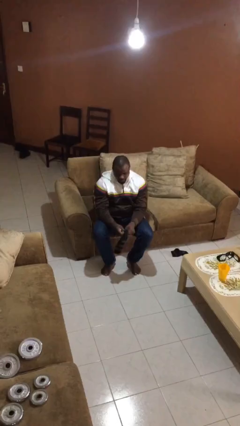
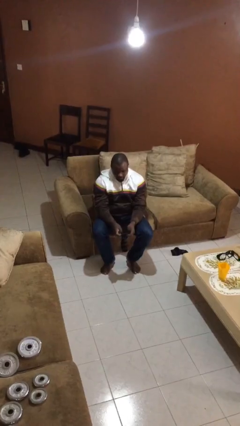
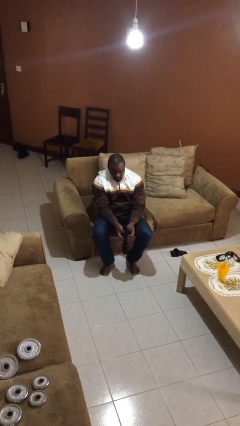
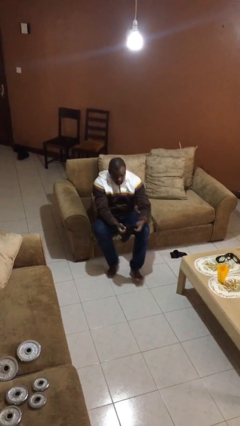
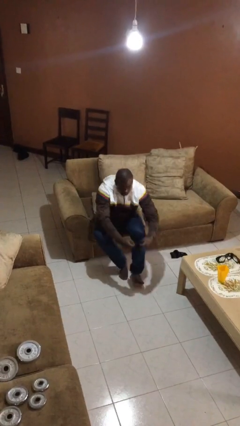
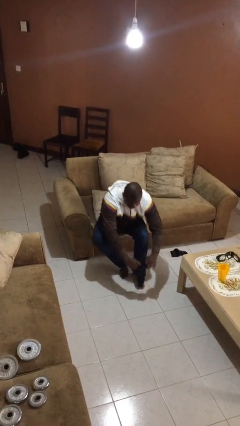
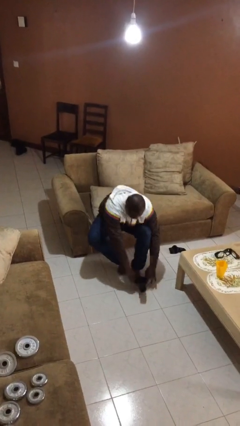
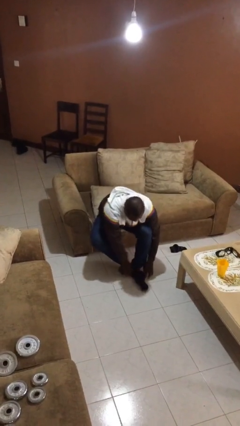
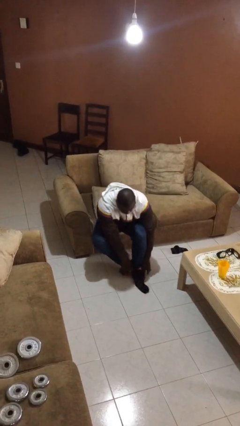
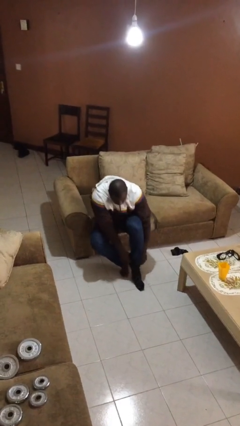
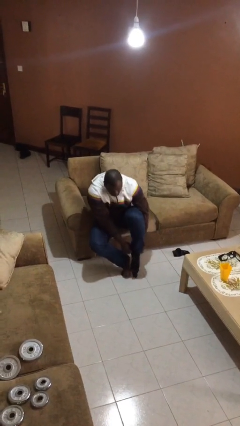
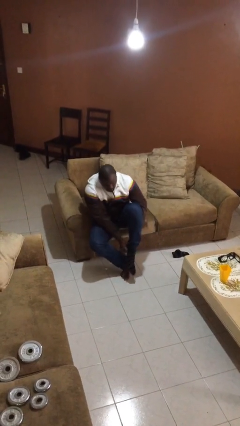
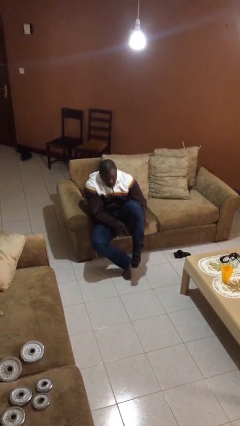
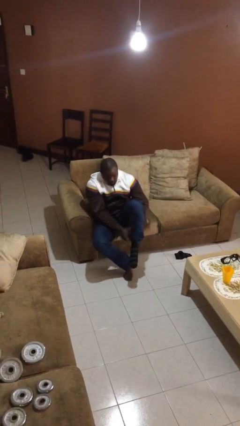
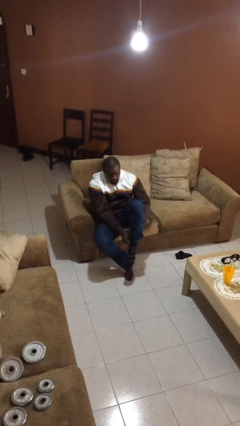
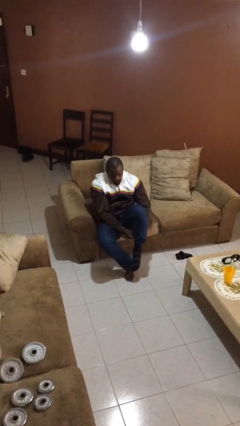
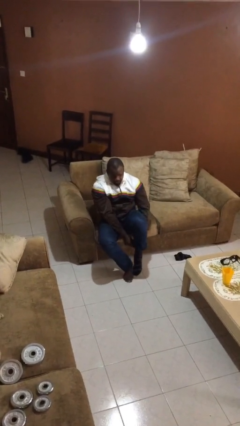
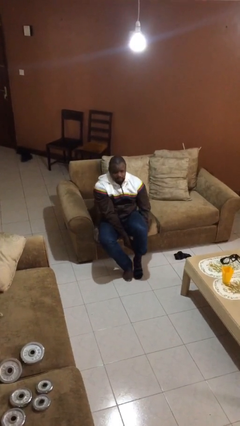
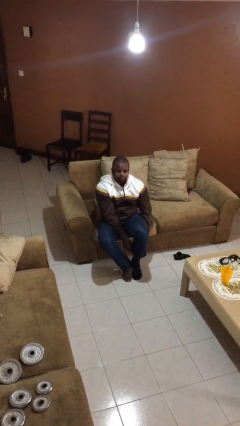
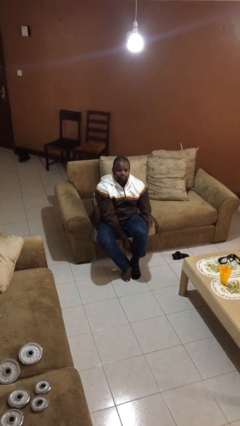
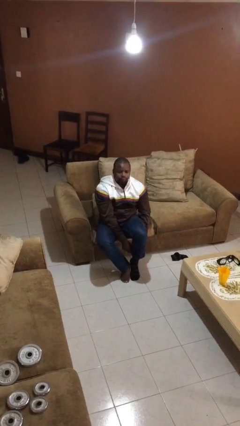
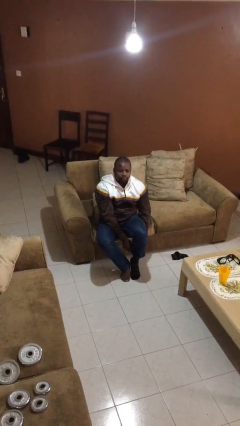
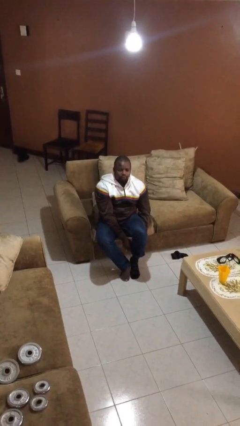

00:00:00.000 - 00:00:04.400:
person puts on socks

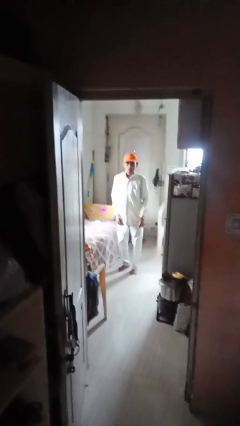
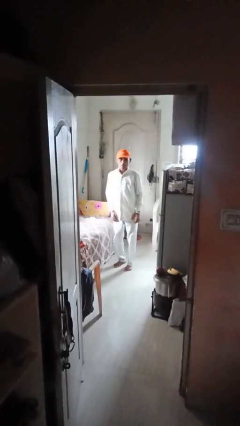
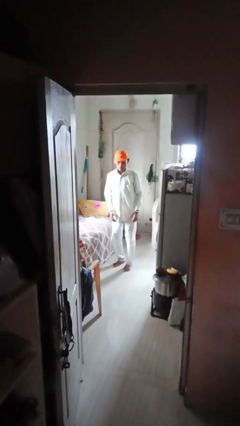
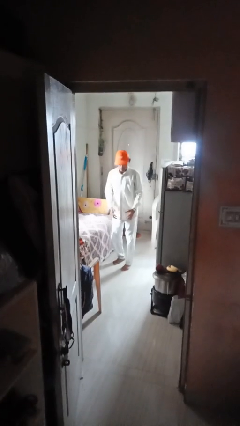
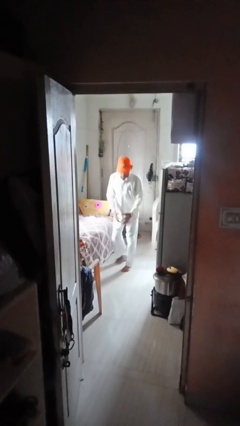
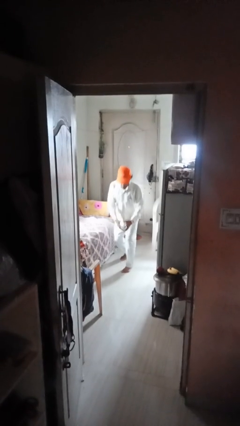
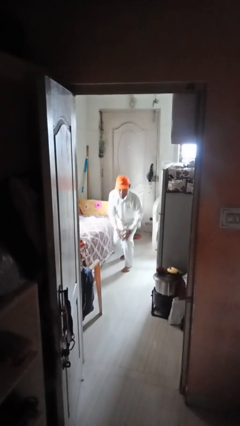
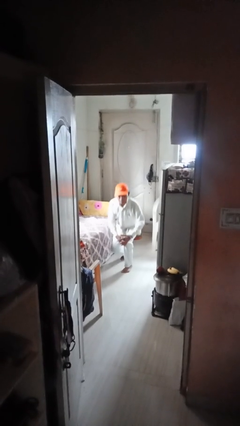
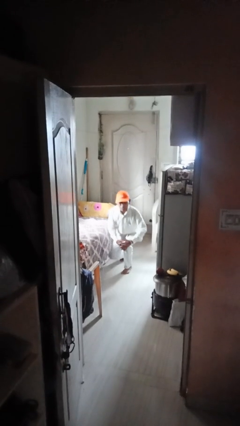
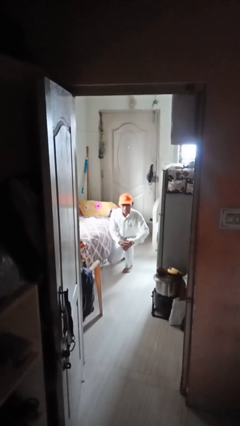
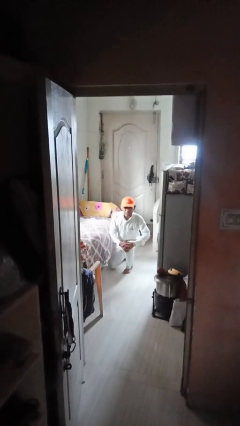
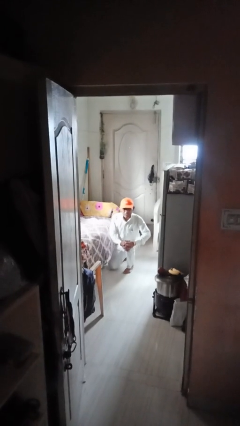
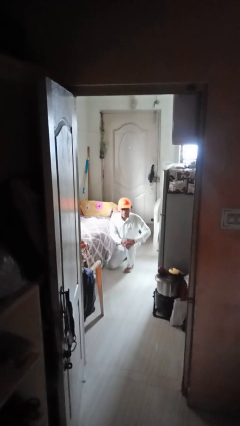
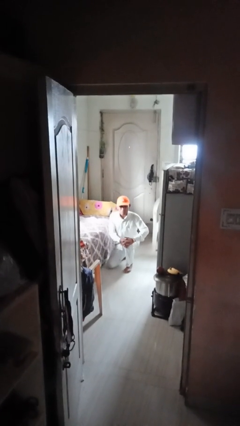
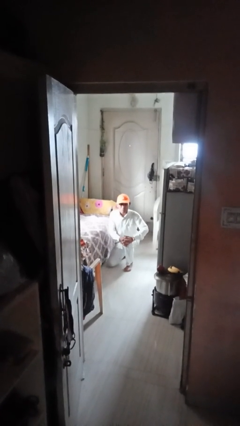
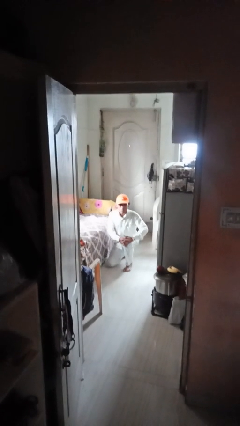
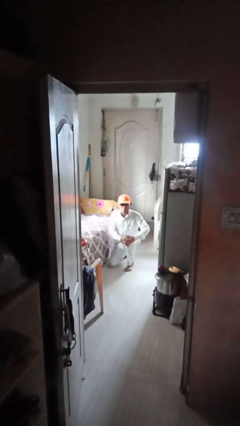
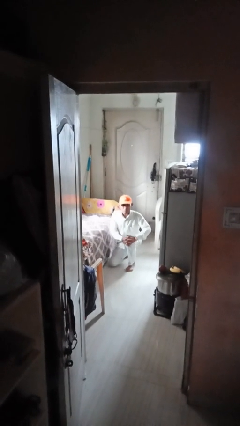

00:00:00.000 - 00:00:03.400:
person exercises with lunges

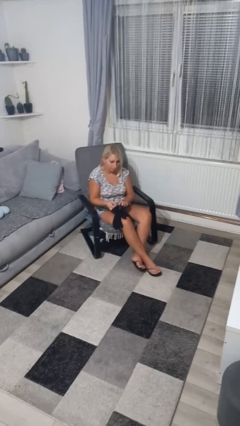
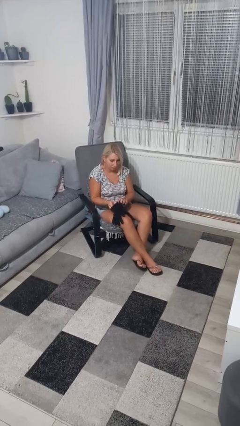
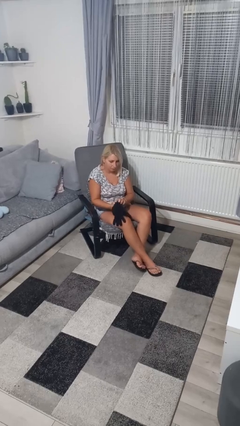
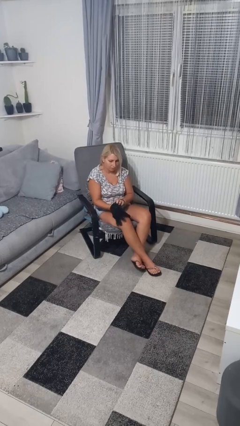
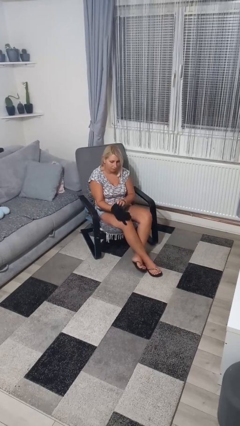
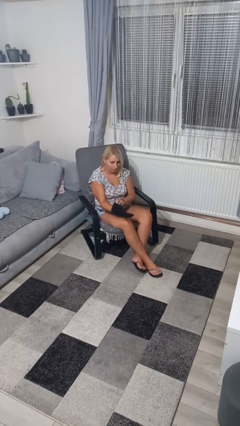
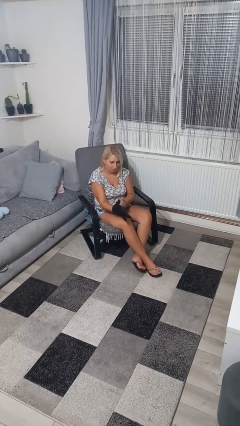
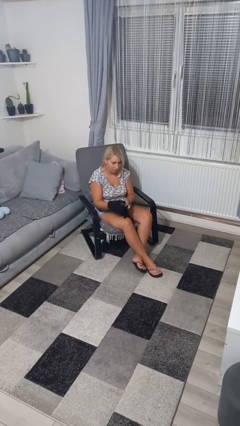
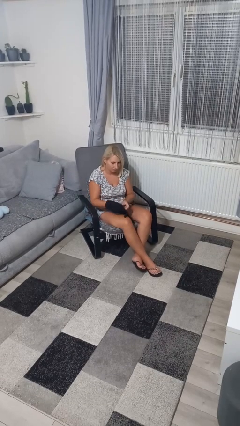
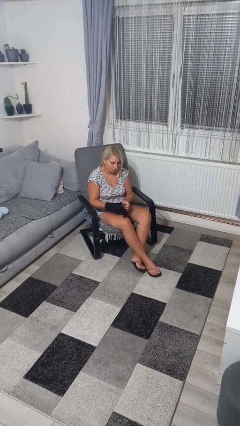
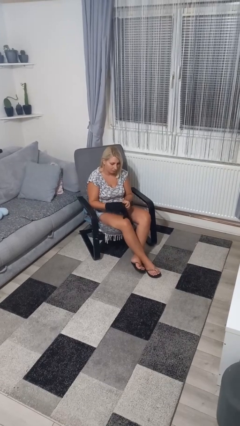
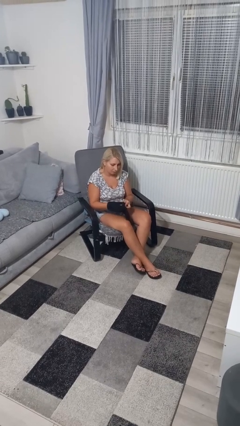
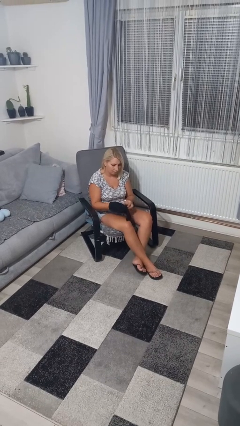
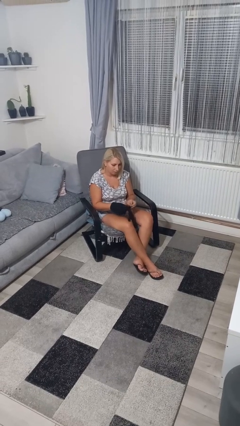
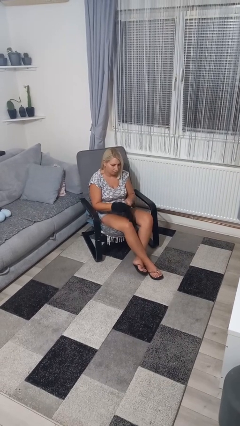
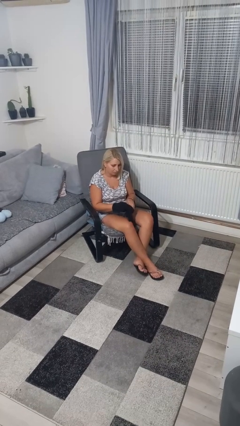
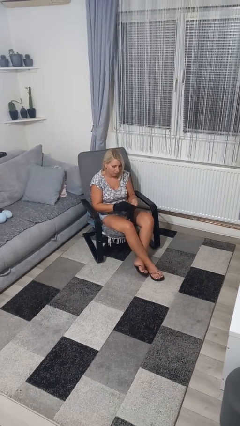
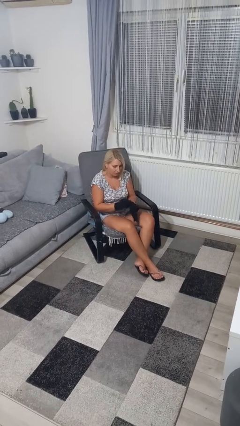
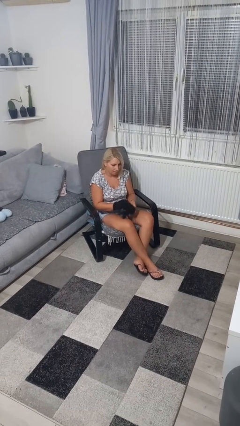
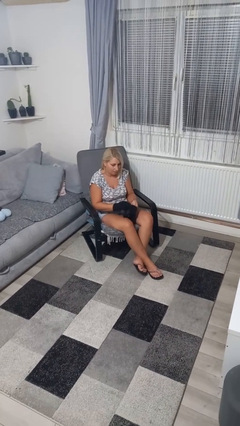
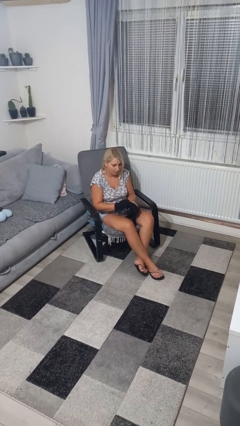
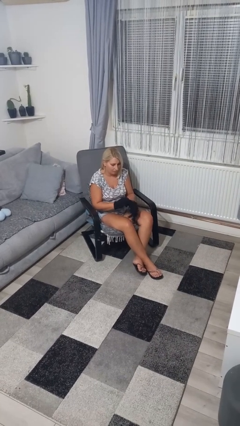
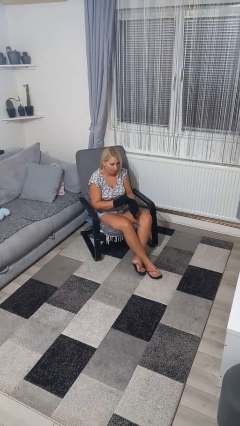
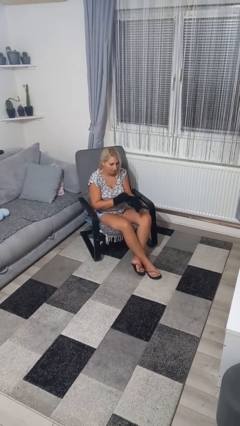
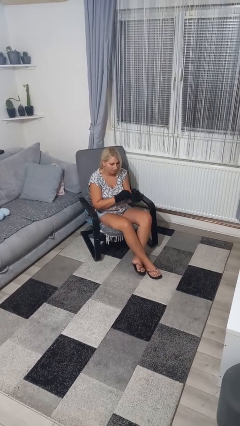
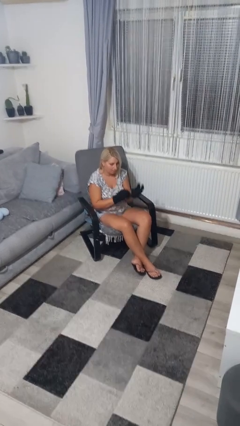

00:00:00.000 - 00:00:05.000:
person puts on gloves

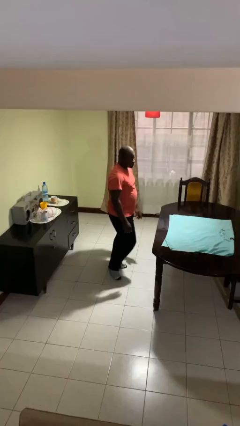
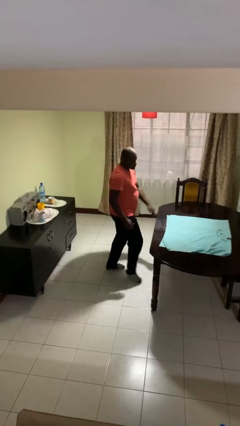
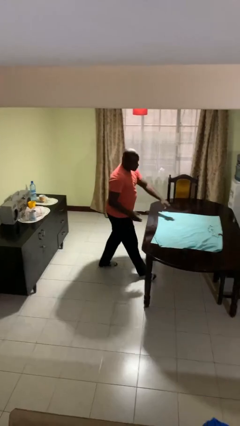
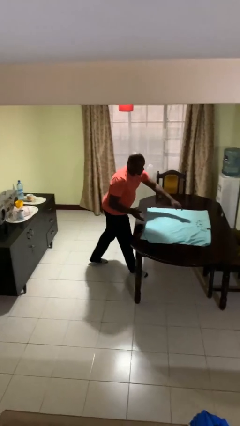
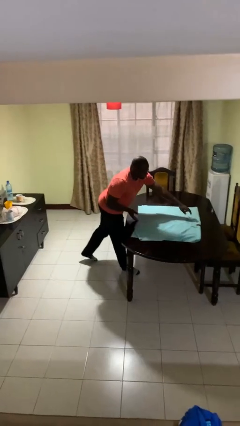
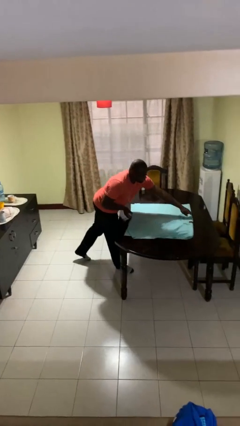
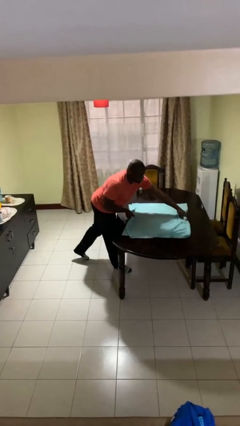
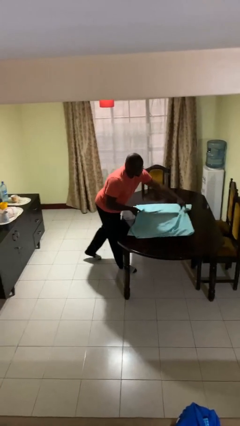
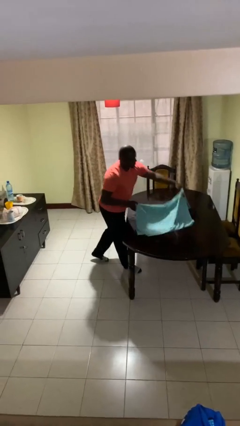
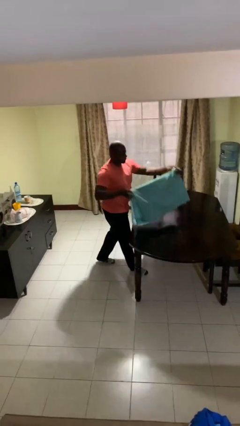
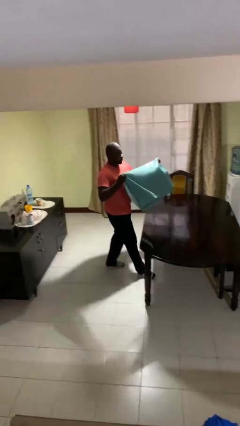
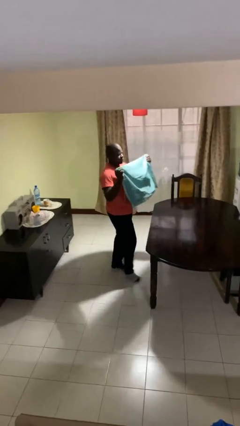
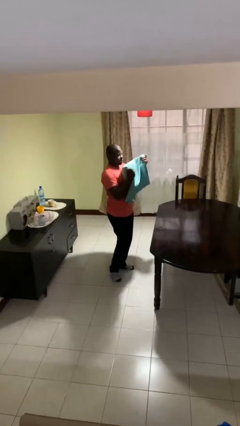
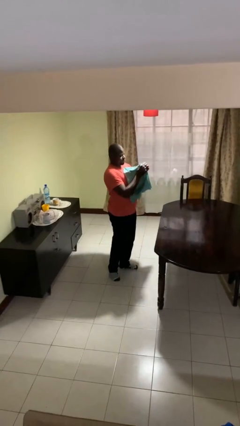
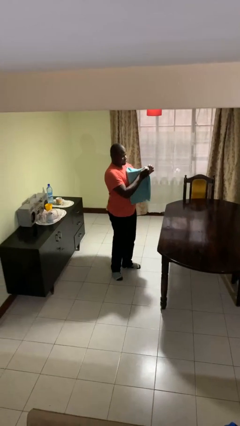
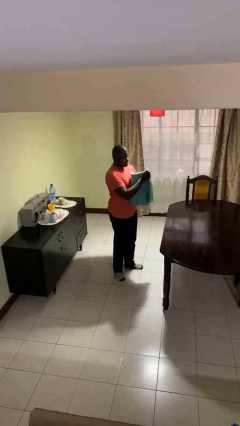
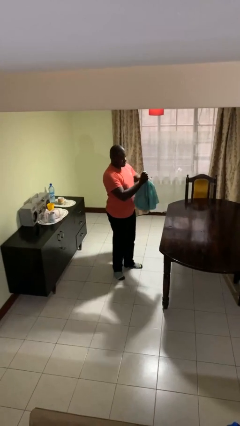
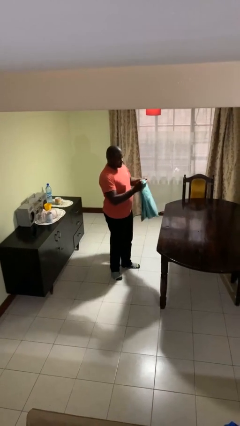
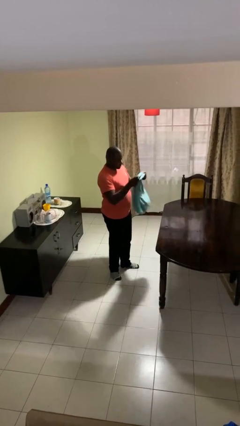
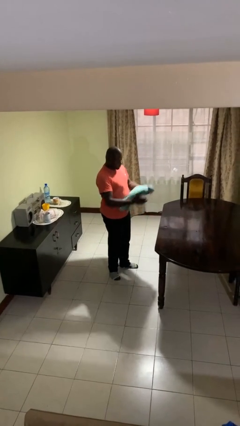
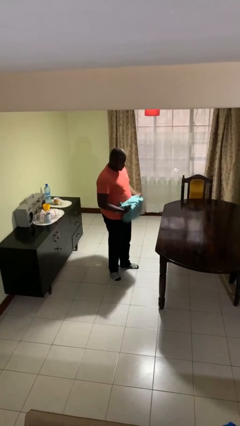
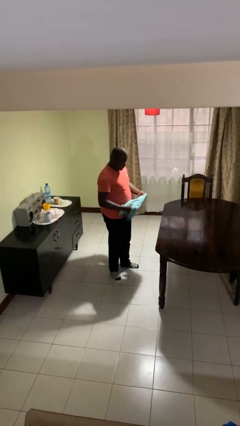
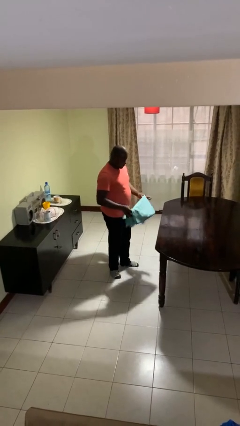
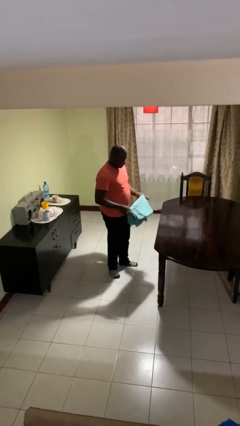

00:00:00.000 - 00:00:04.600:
person folds tablecloth

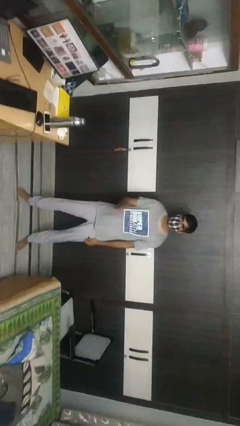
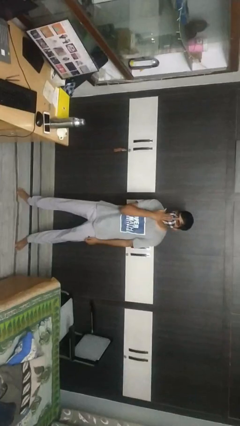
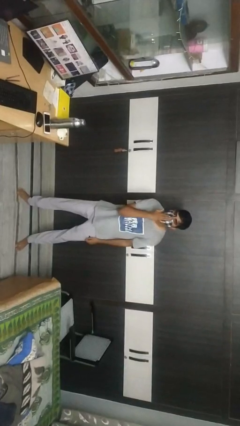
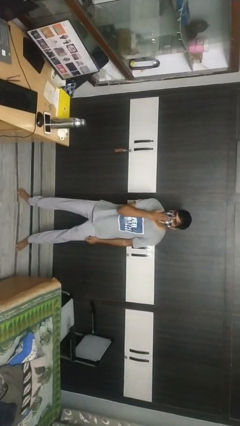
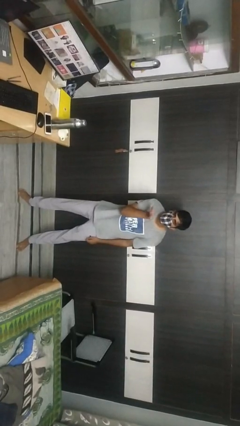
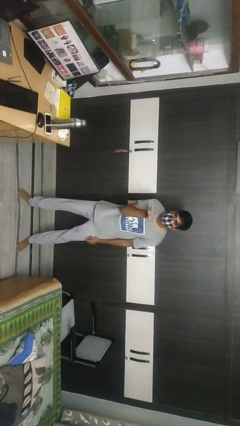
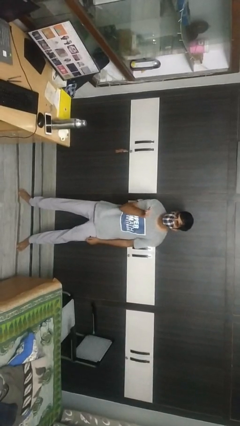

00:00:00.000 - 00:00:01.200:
person gestures blow kiss
